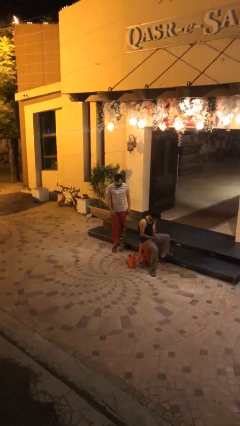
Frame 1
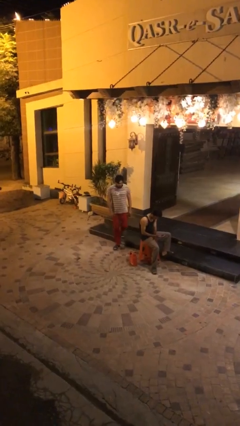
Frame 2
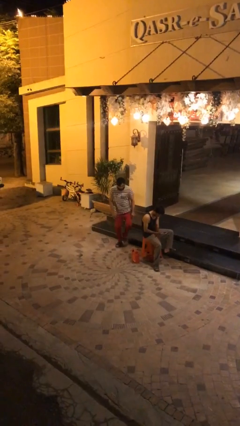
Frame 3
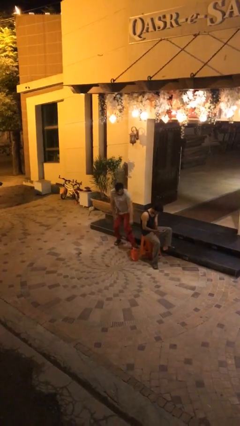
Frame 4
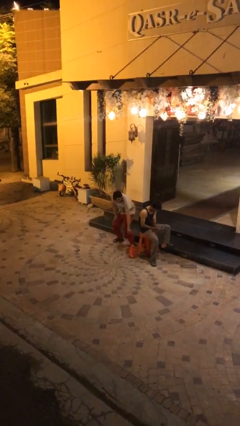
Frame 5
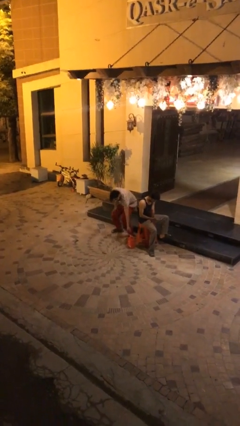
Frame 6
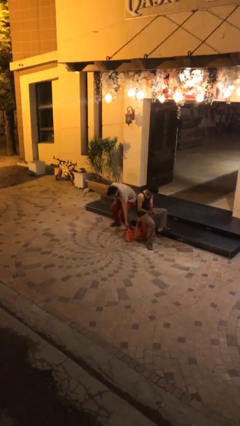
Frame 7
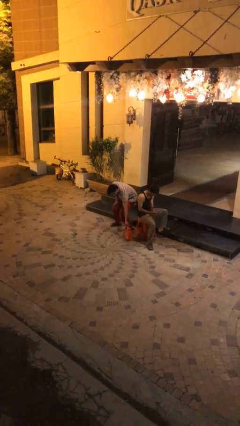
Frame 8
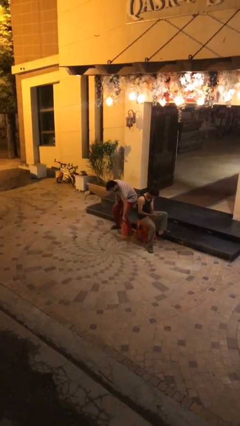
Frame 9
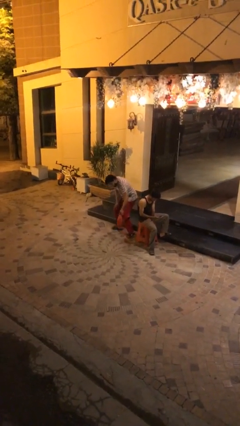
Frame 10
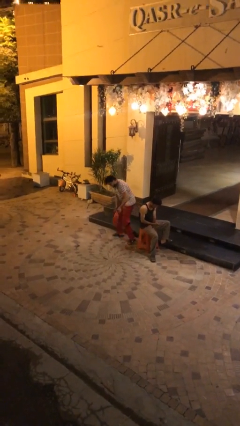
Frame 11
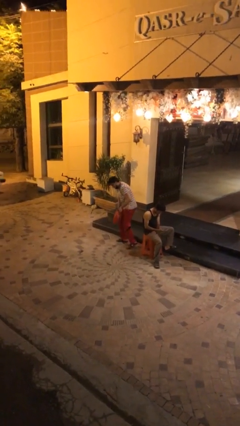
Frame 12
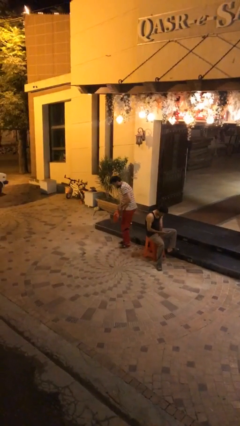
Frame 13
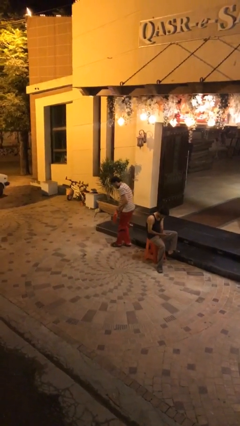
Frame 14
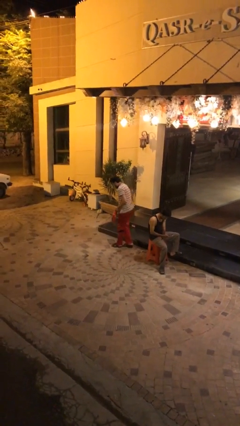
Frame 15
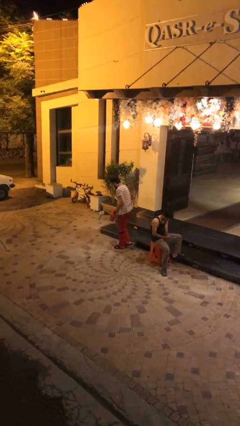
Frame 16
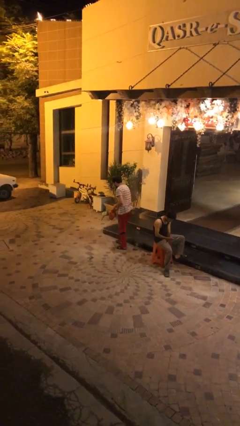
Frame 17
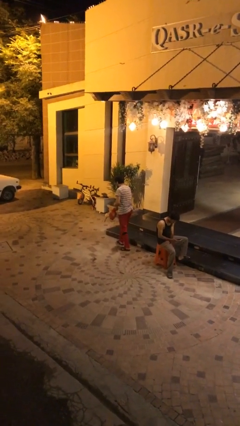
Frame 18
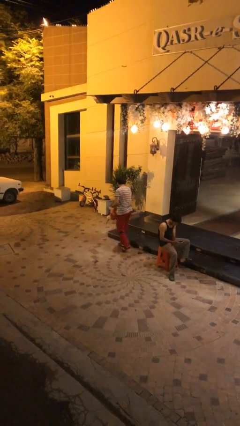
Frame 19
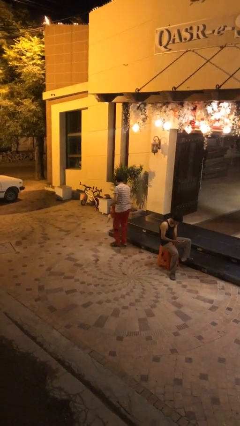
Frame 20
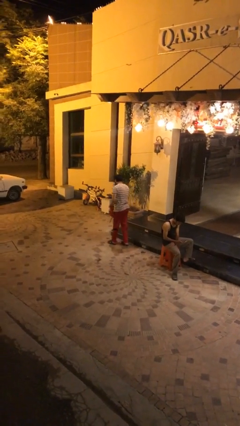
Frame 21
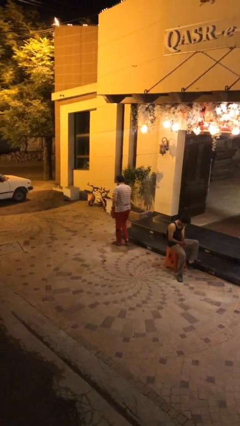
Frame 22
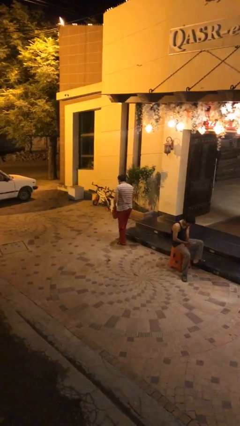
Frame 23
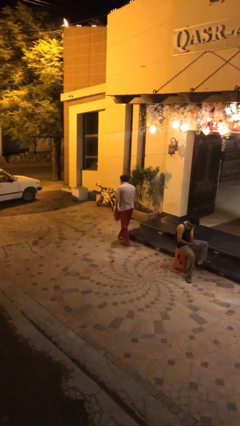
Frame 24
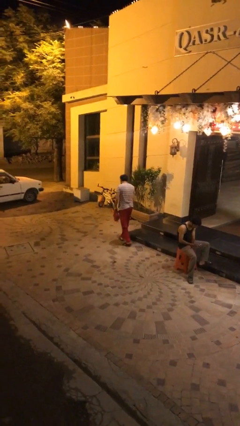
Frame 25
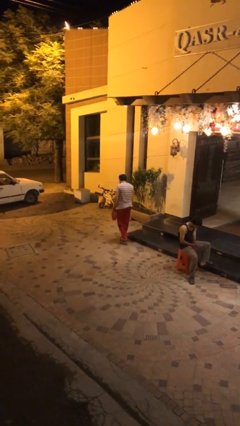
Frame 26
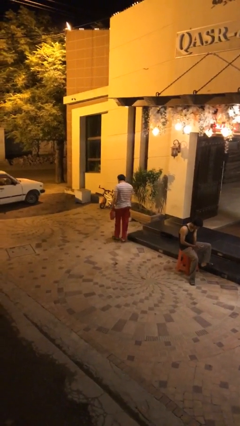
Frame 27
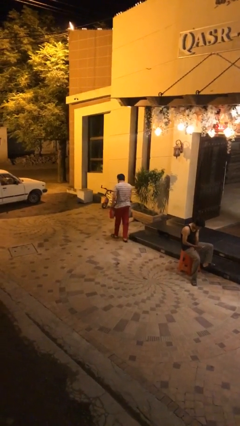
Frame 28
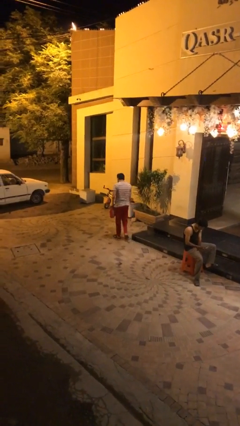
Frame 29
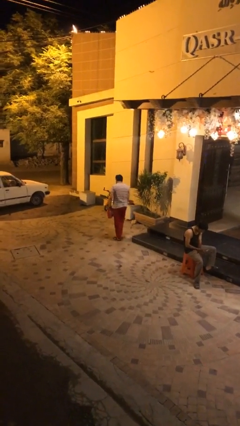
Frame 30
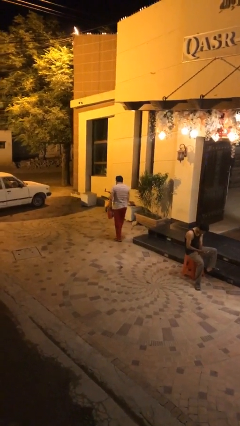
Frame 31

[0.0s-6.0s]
person steals object from person

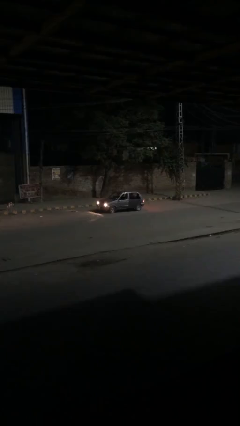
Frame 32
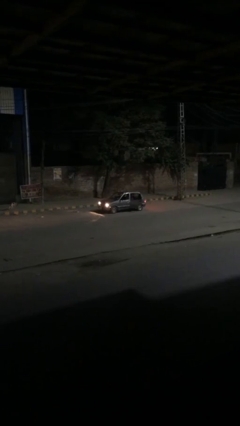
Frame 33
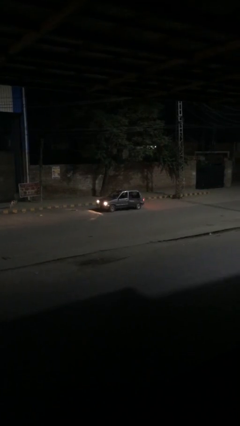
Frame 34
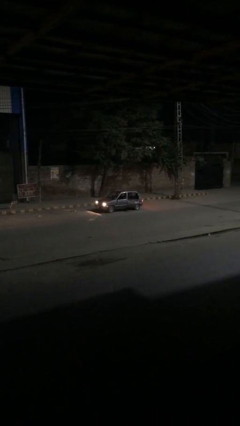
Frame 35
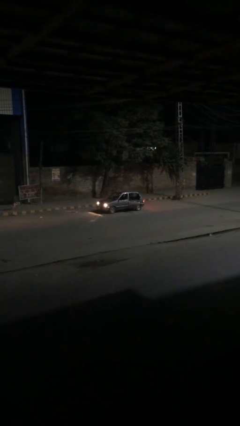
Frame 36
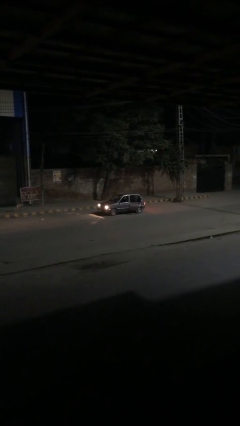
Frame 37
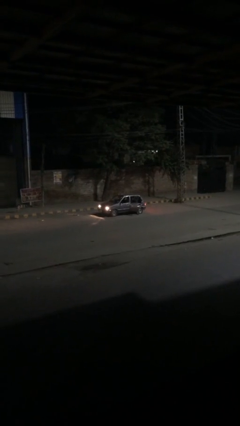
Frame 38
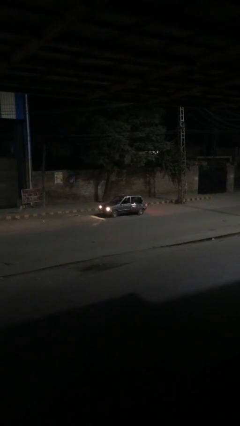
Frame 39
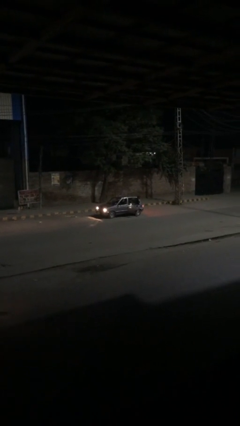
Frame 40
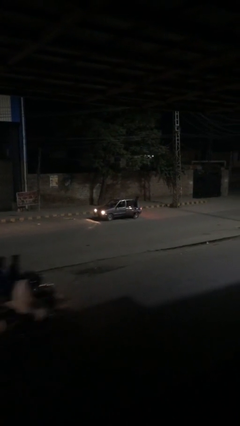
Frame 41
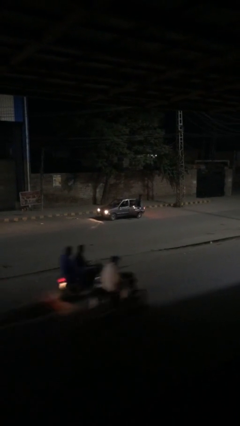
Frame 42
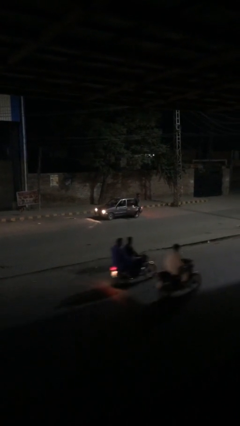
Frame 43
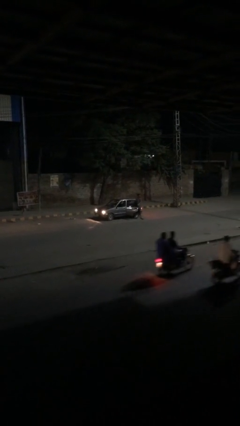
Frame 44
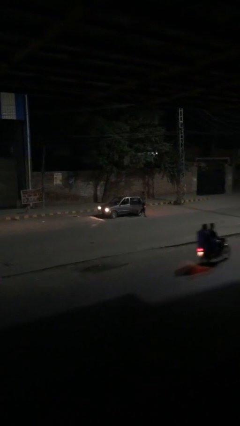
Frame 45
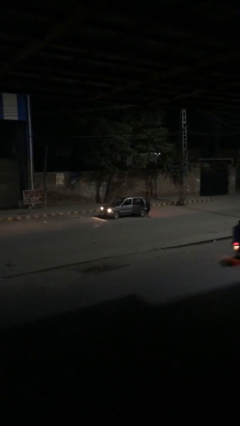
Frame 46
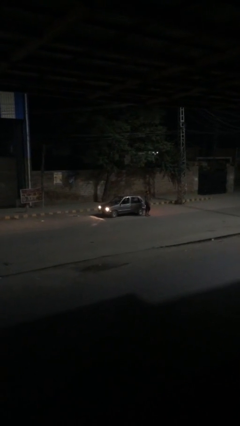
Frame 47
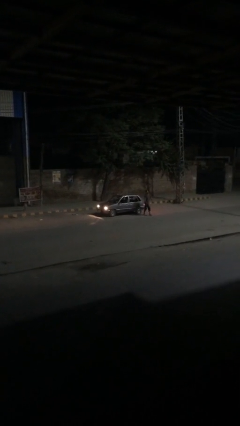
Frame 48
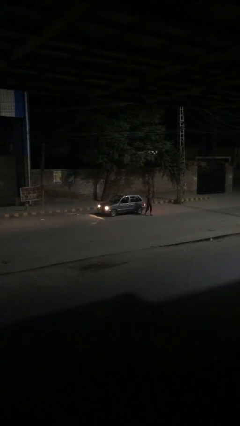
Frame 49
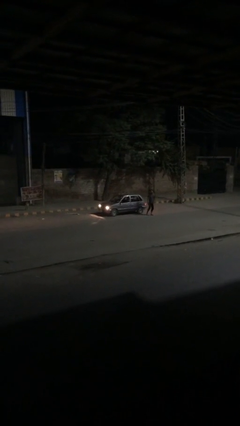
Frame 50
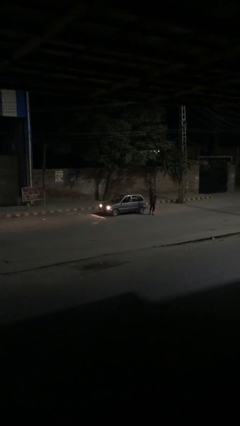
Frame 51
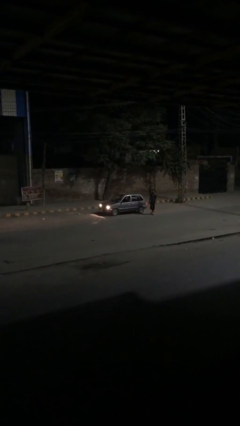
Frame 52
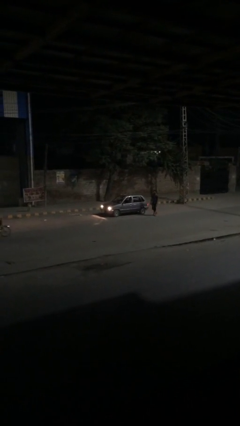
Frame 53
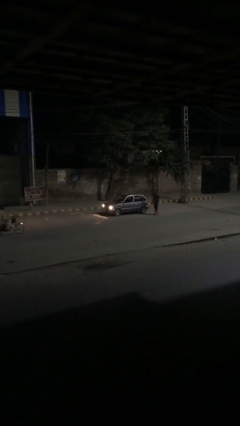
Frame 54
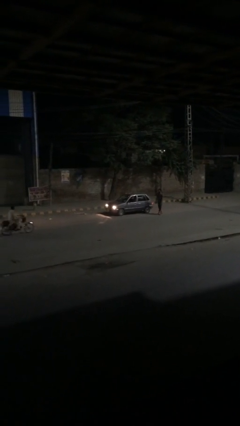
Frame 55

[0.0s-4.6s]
car drops off person

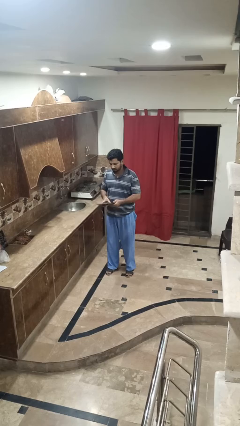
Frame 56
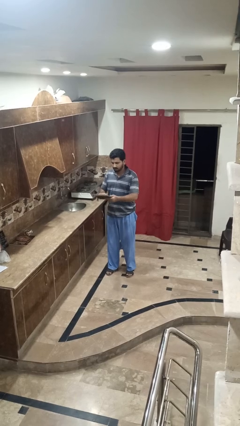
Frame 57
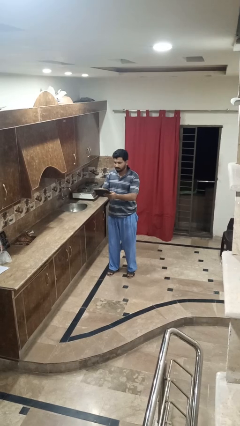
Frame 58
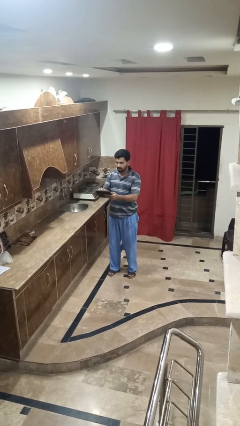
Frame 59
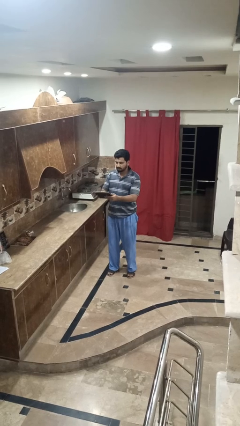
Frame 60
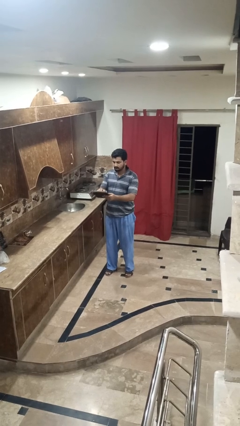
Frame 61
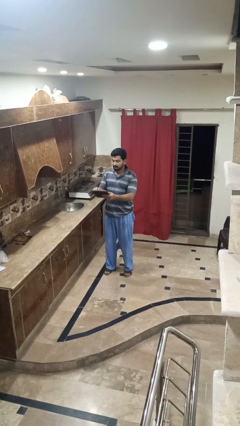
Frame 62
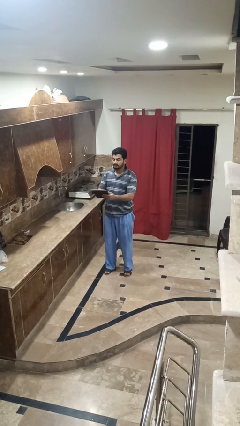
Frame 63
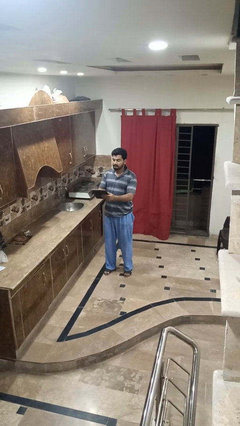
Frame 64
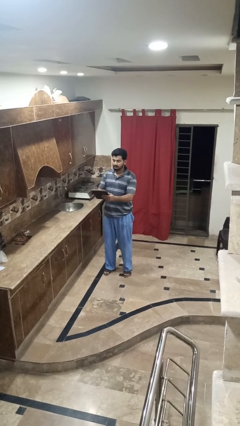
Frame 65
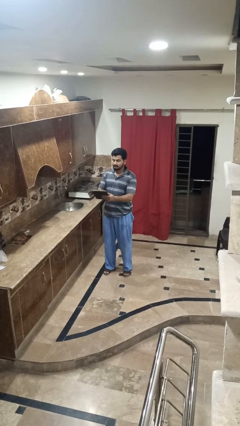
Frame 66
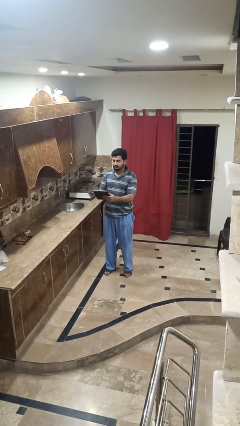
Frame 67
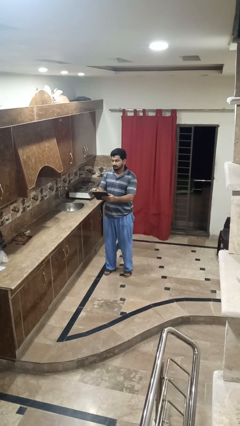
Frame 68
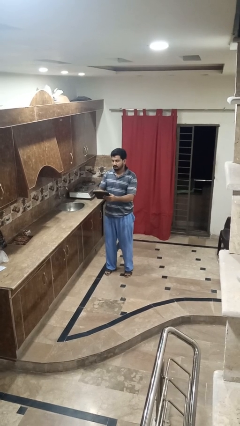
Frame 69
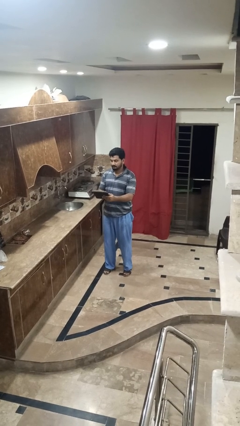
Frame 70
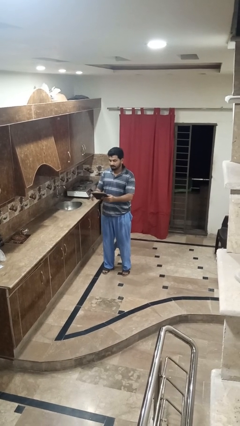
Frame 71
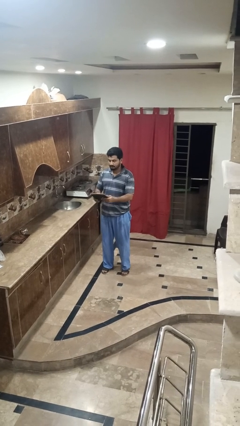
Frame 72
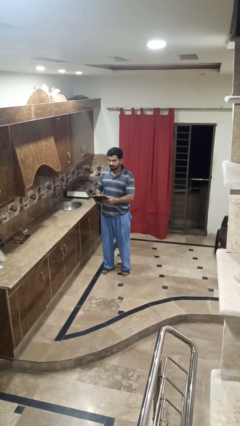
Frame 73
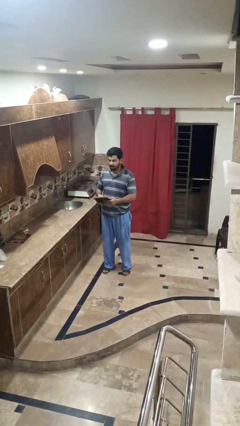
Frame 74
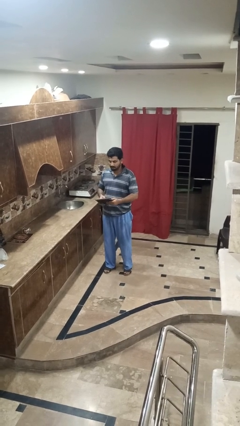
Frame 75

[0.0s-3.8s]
person interacts with tablet

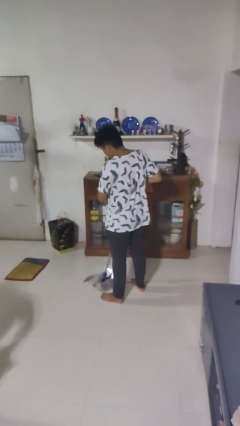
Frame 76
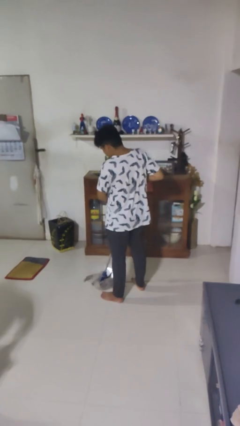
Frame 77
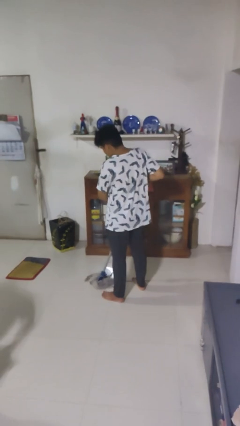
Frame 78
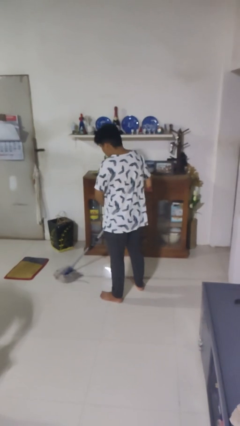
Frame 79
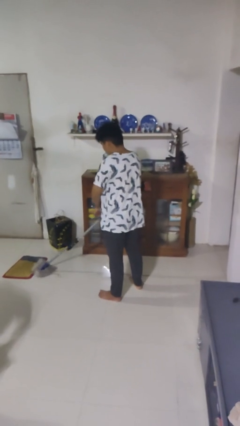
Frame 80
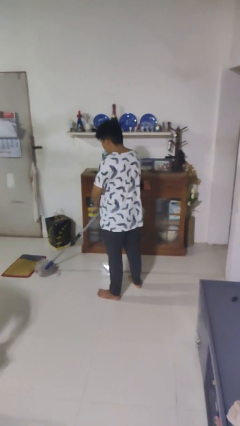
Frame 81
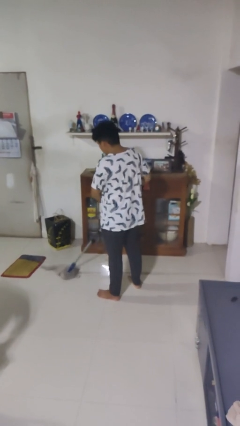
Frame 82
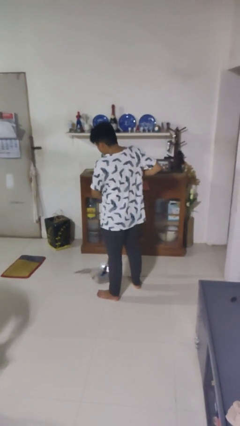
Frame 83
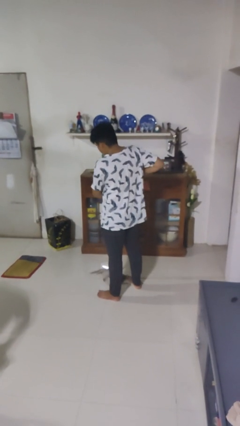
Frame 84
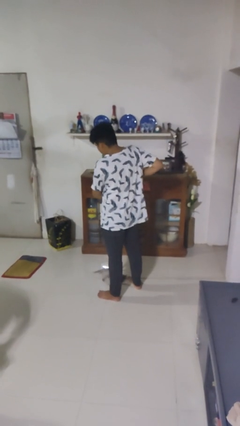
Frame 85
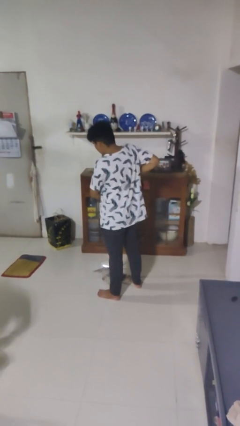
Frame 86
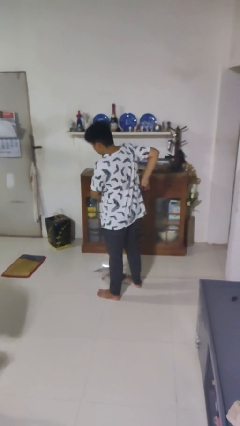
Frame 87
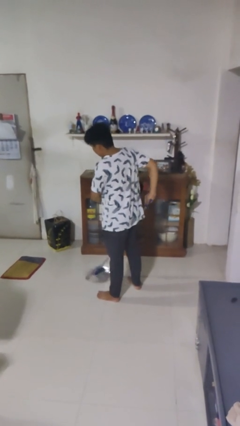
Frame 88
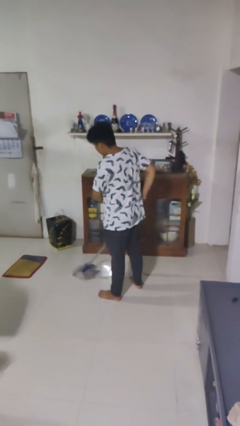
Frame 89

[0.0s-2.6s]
person mops

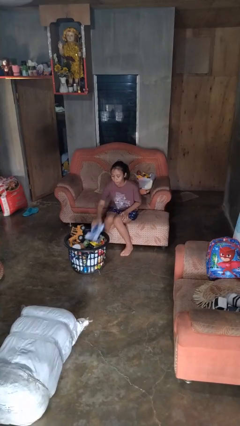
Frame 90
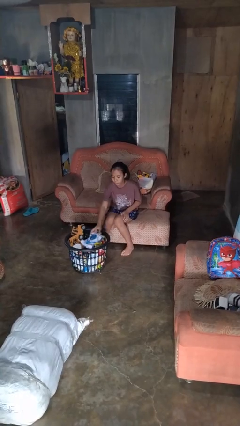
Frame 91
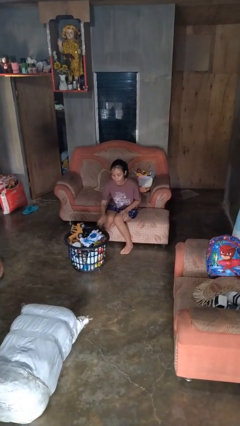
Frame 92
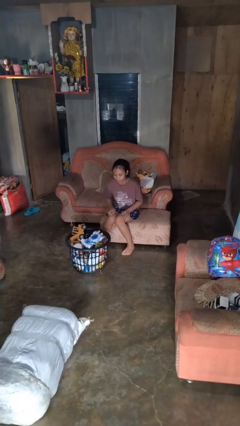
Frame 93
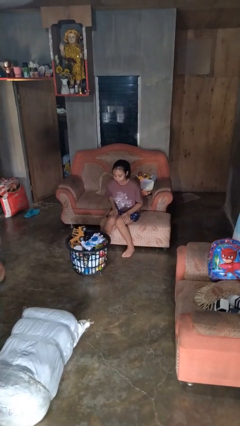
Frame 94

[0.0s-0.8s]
person puts object into basket
